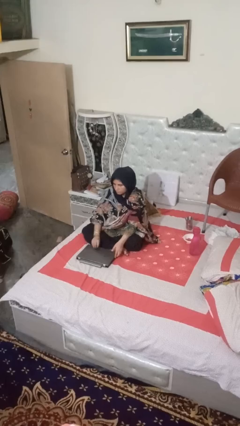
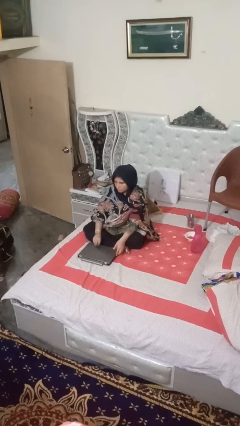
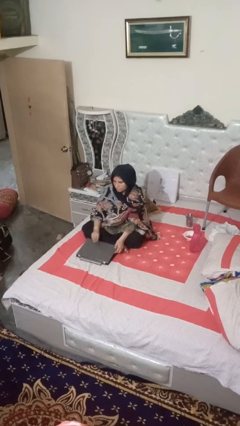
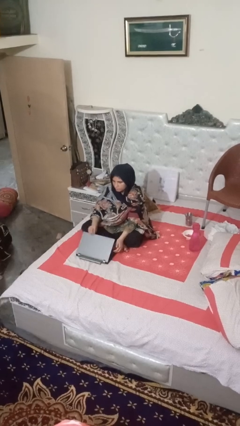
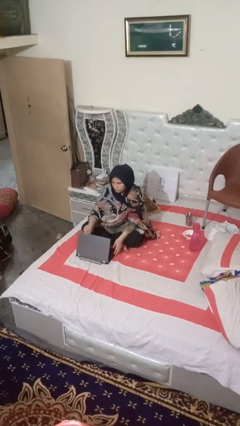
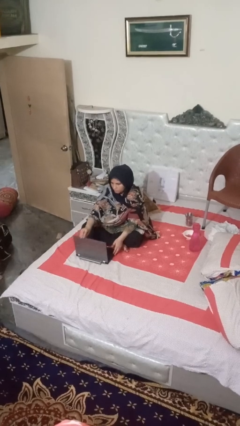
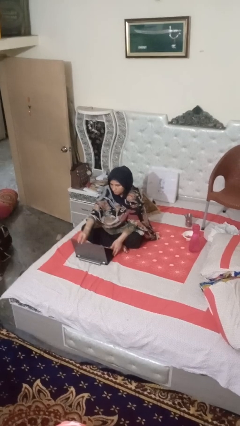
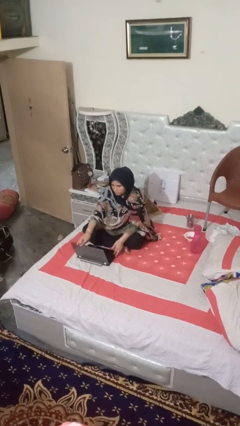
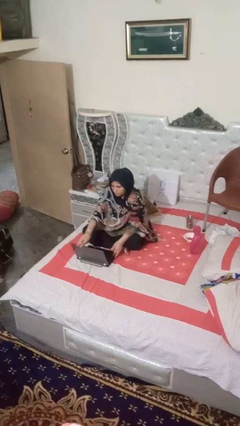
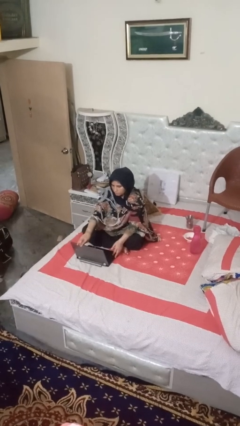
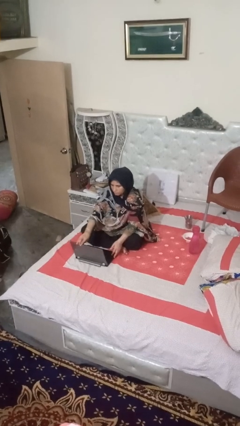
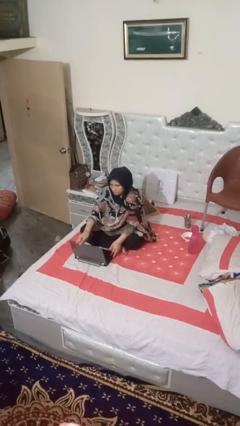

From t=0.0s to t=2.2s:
person opens laptop

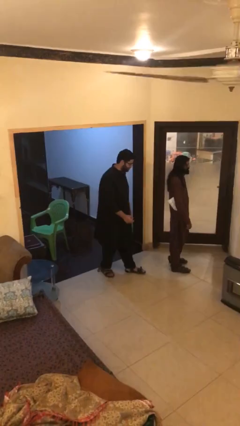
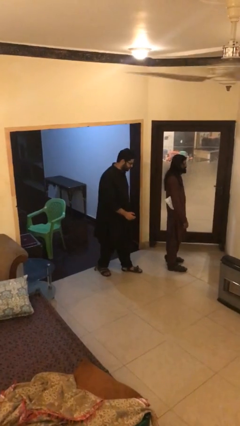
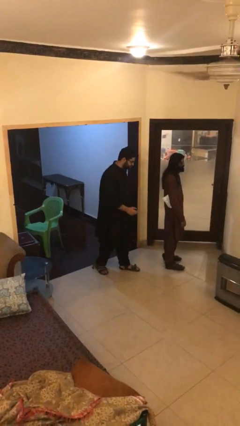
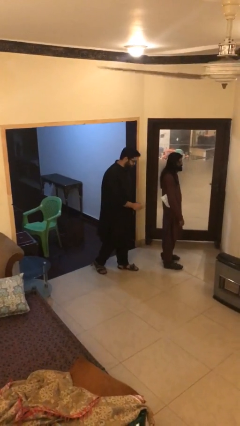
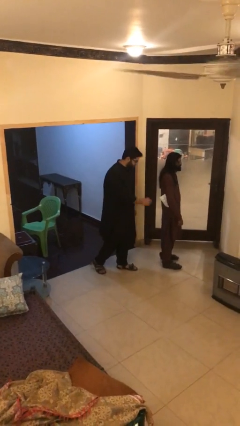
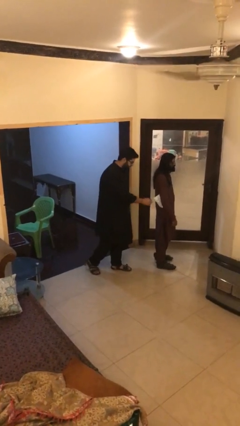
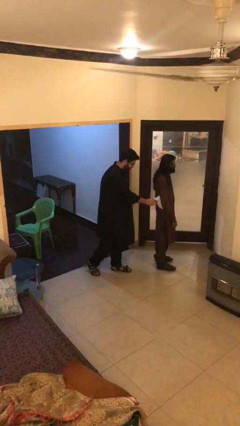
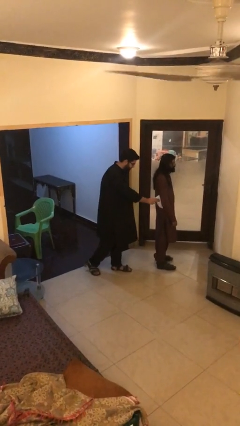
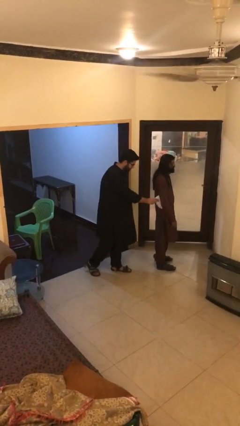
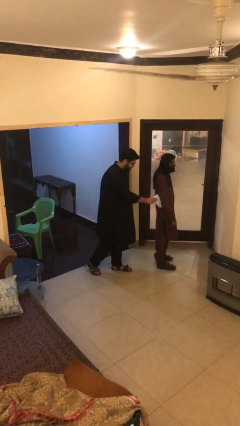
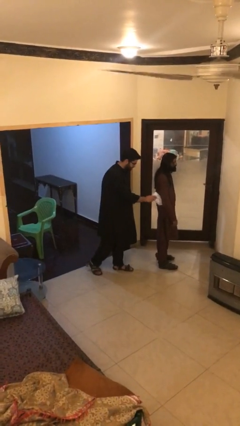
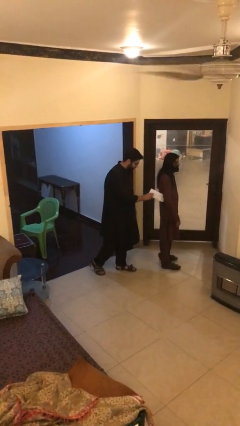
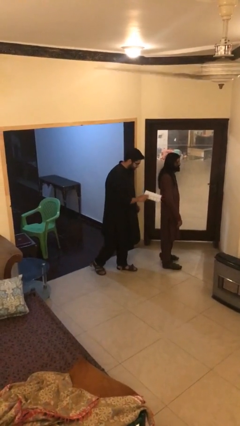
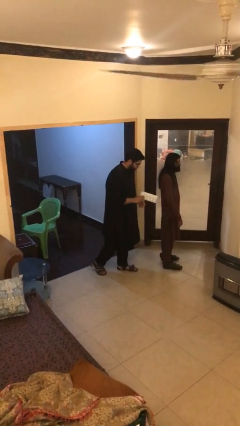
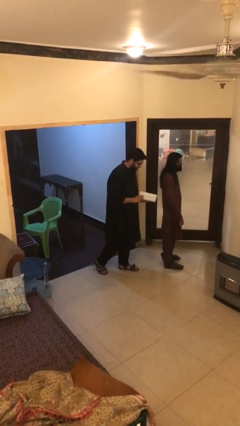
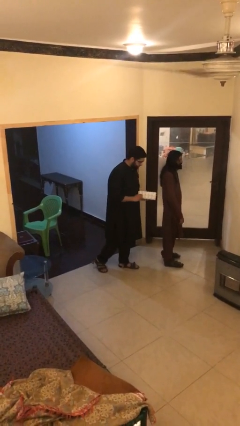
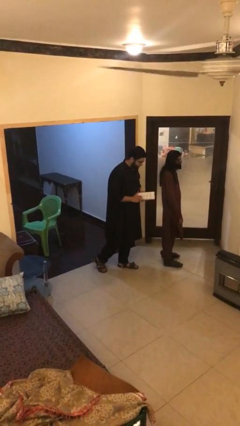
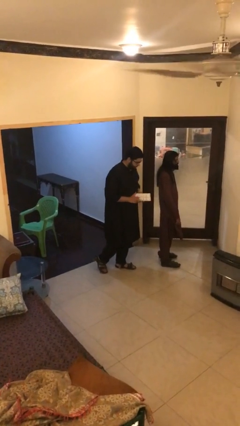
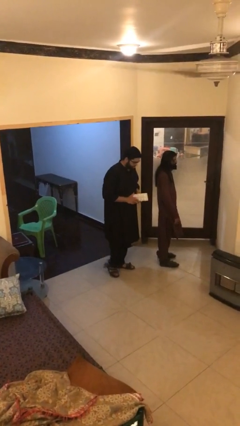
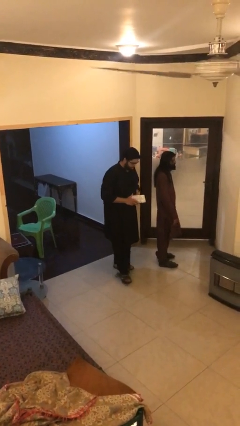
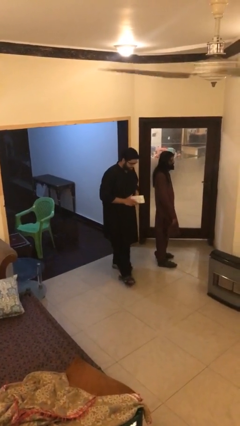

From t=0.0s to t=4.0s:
person steals object from person

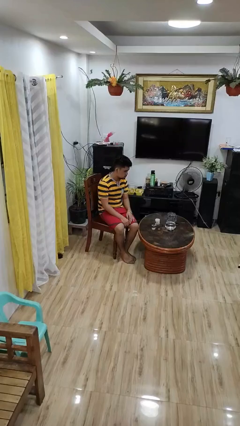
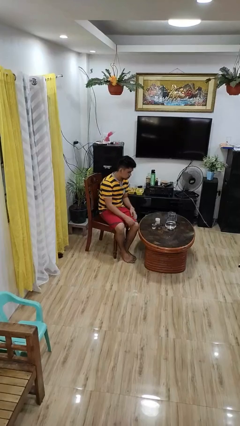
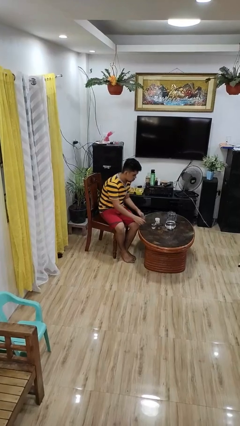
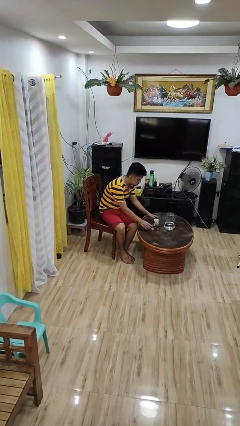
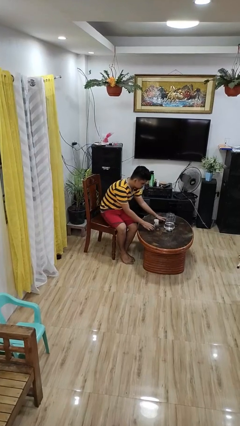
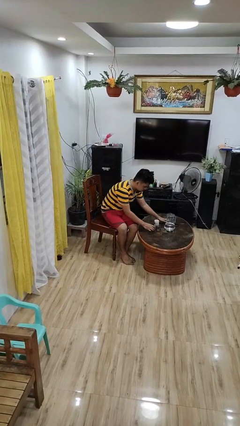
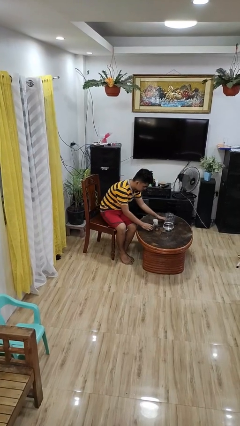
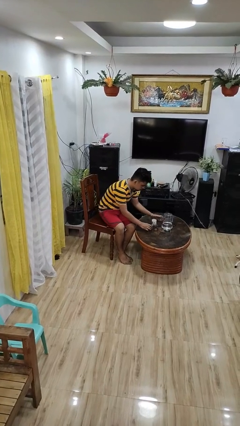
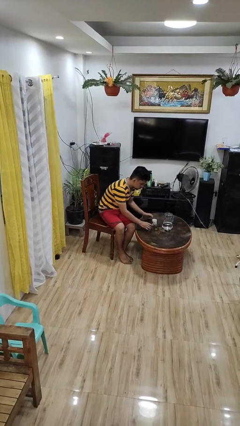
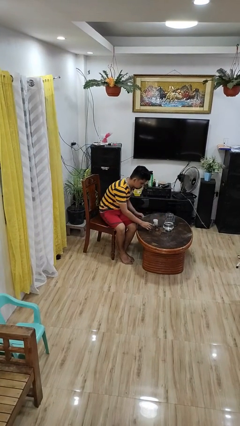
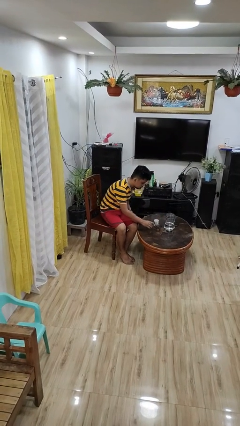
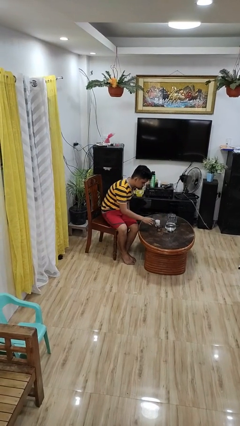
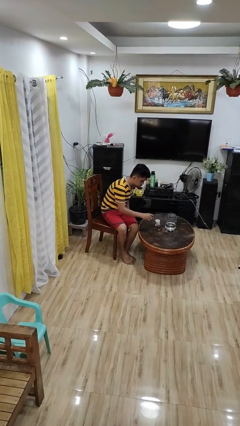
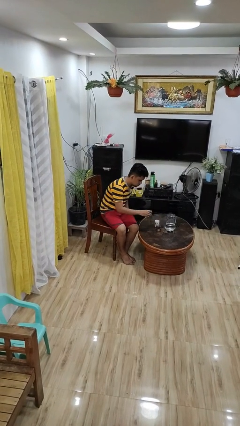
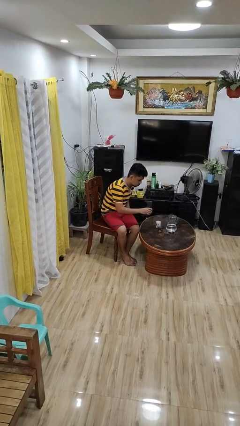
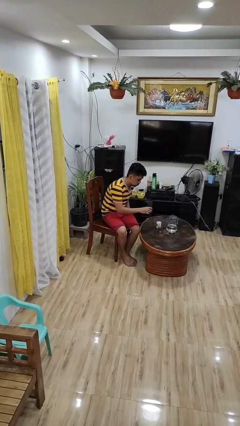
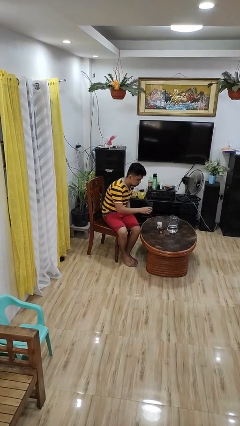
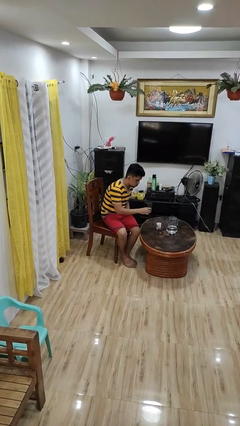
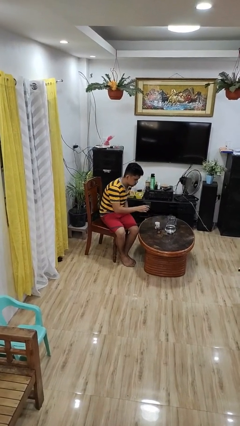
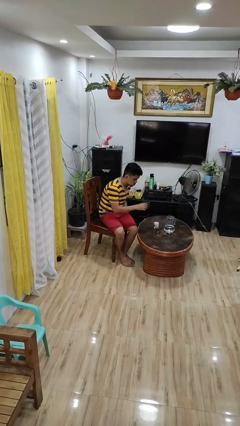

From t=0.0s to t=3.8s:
person picks up object from table

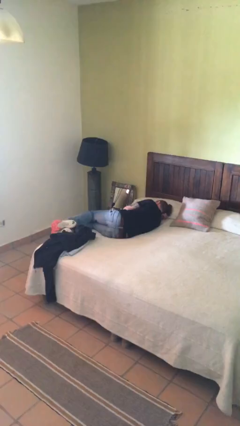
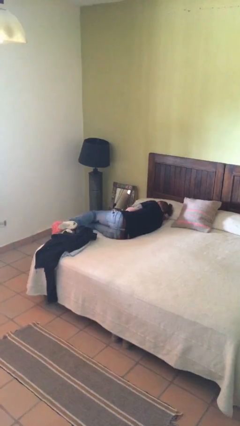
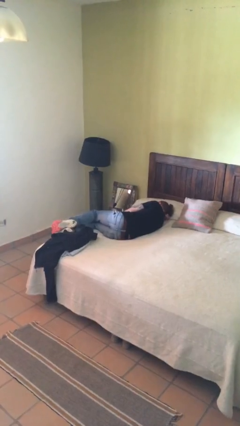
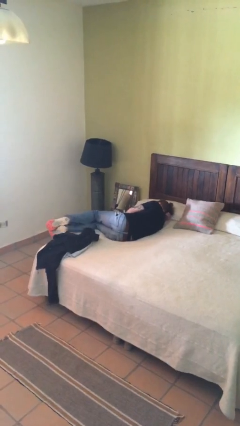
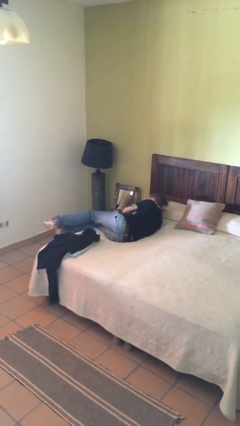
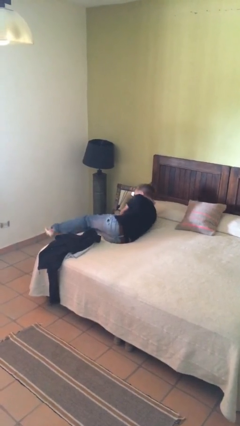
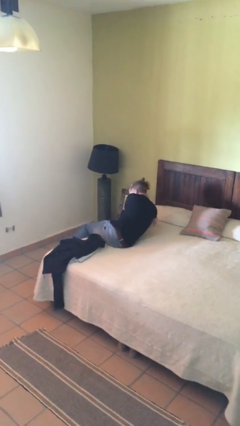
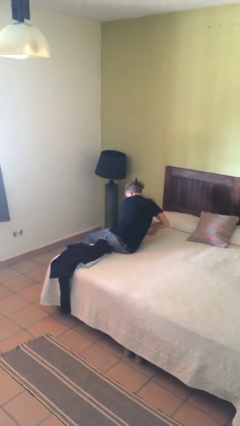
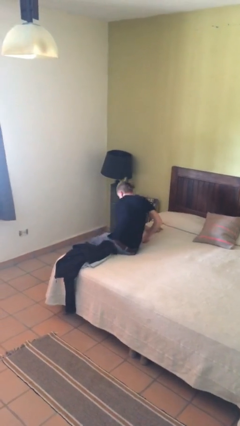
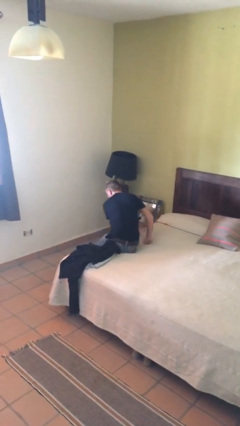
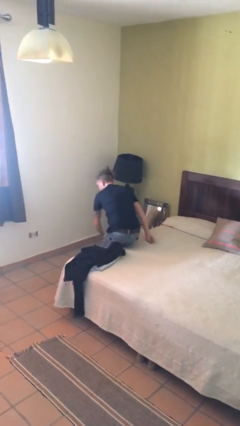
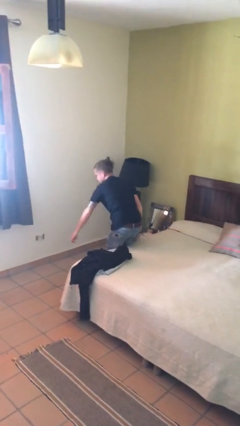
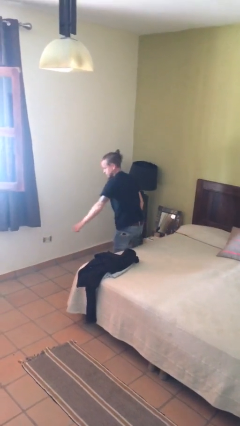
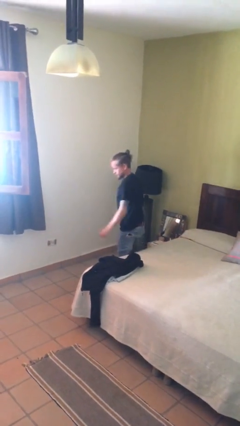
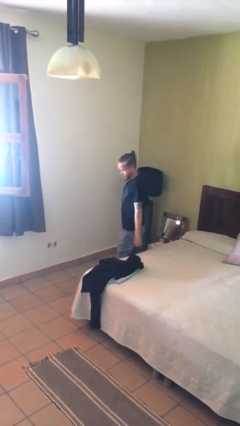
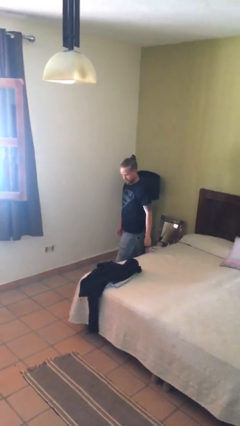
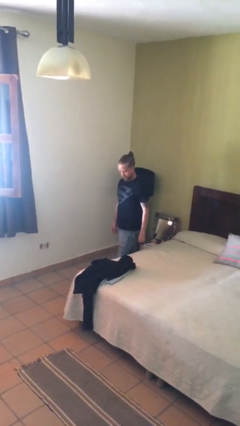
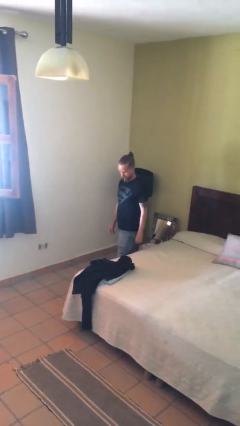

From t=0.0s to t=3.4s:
person stands up

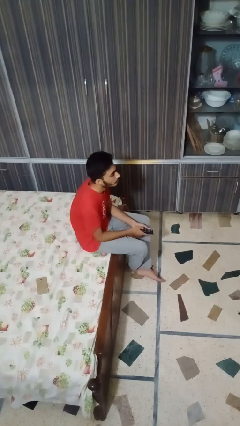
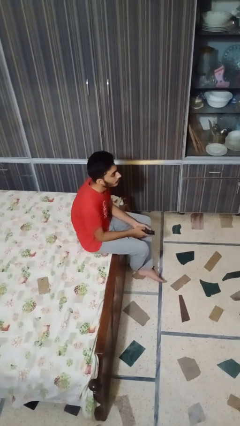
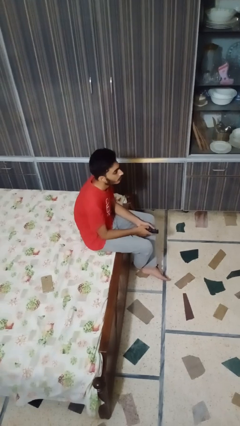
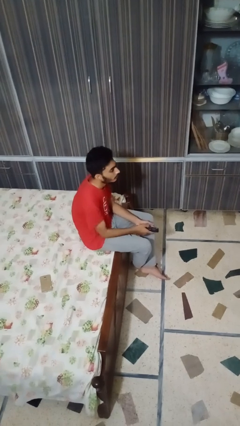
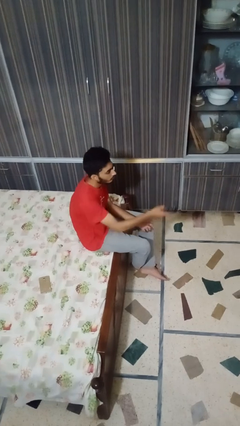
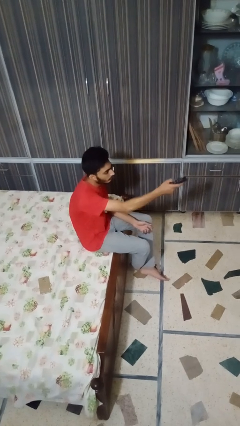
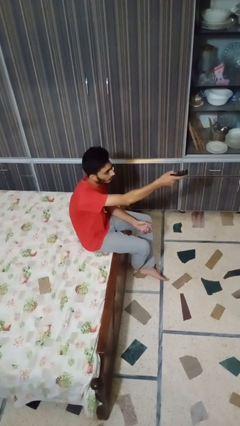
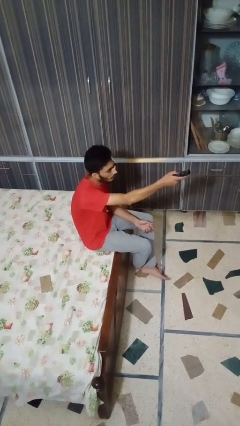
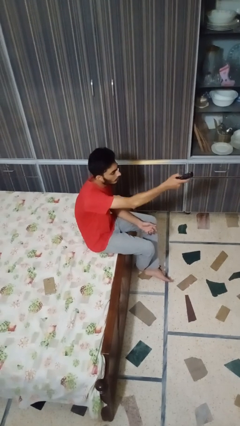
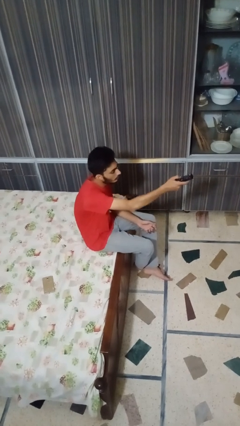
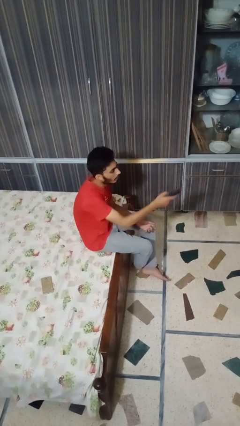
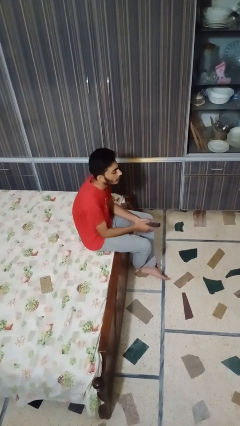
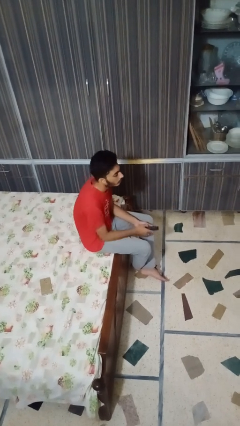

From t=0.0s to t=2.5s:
person uses television remote

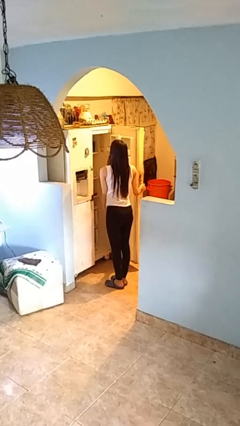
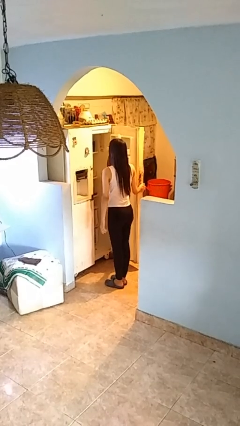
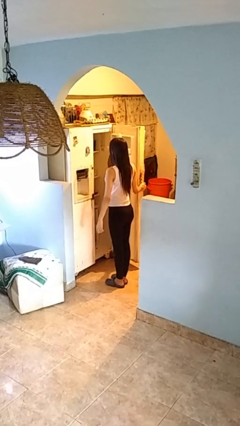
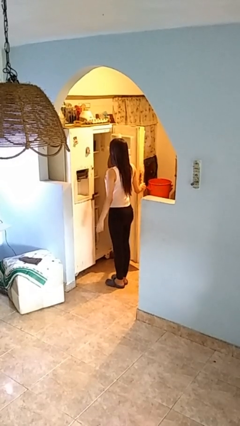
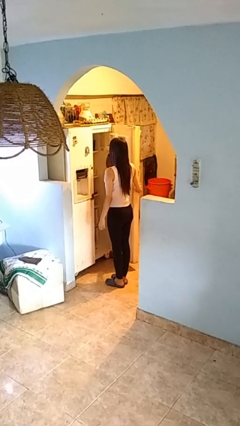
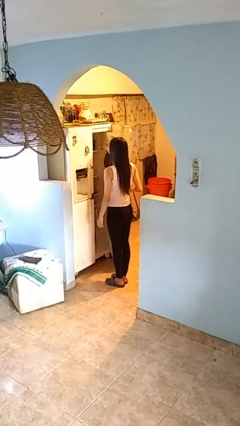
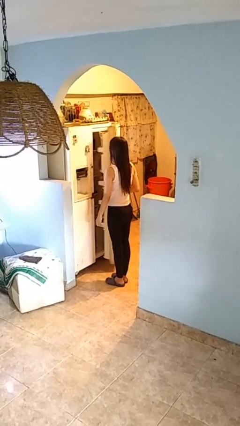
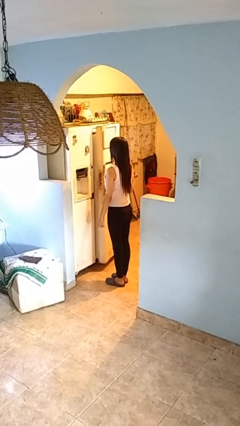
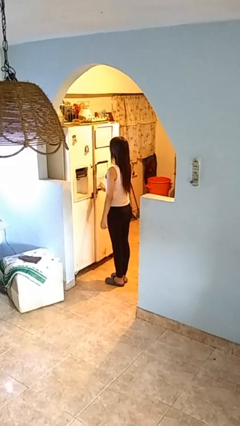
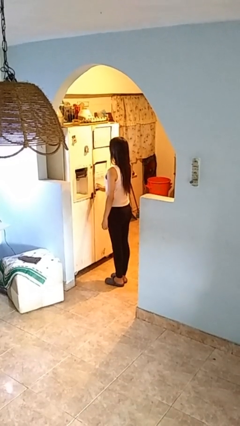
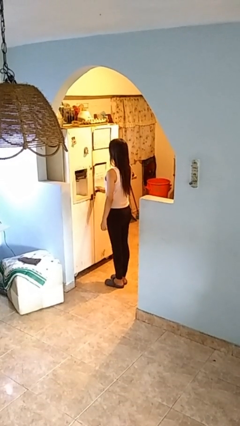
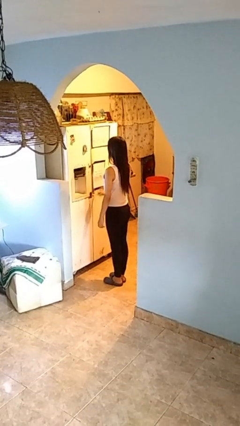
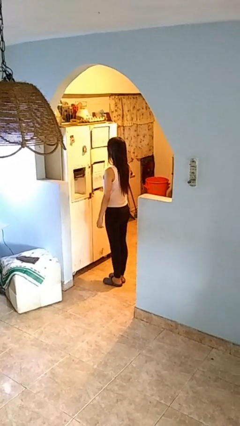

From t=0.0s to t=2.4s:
person closes refrigerator
